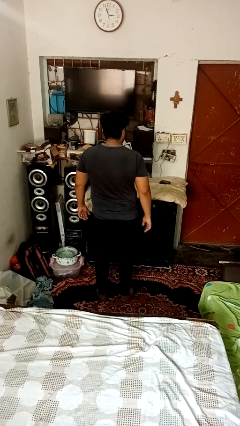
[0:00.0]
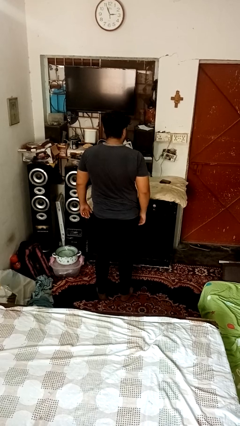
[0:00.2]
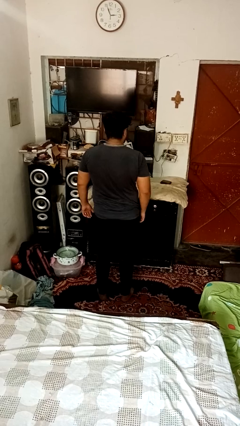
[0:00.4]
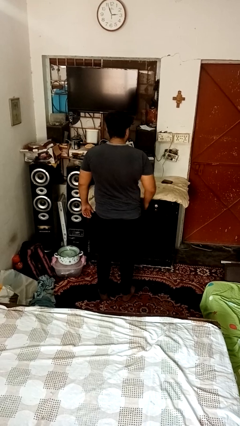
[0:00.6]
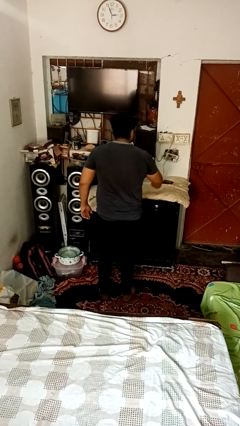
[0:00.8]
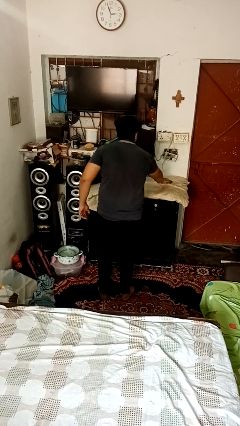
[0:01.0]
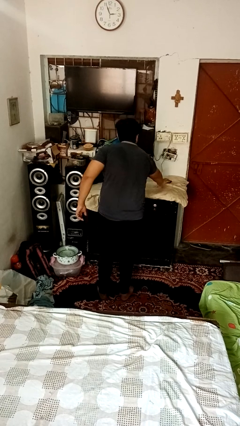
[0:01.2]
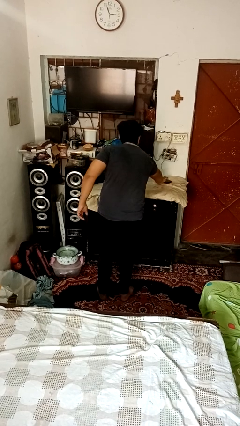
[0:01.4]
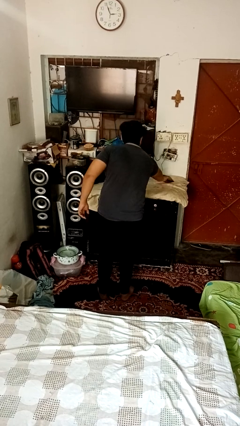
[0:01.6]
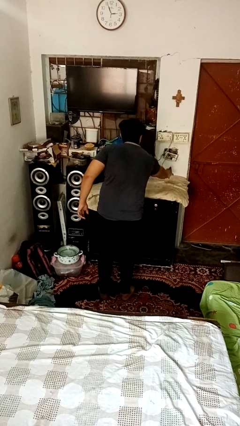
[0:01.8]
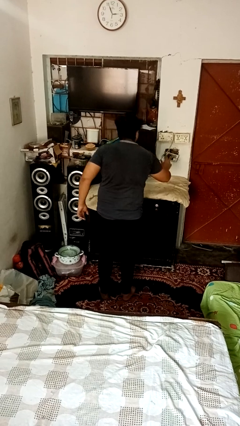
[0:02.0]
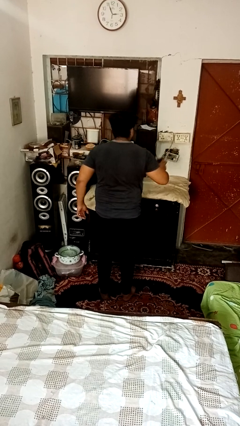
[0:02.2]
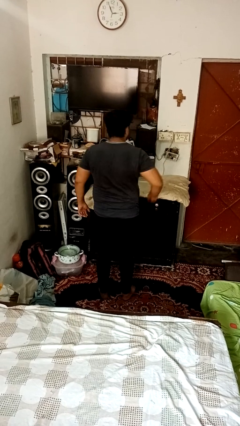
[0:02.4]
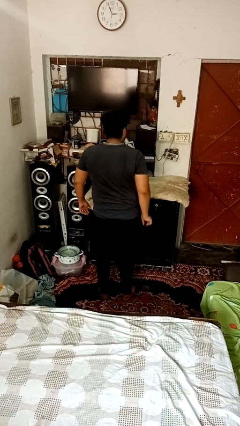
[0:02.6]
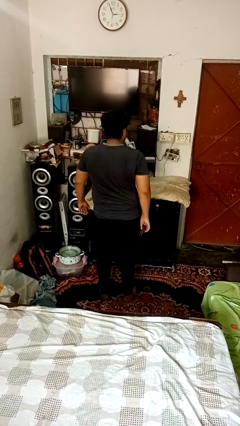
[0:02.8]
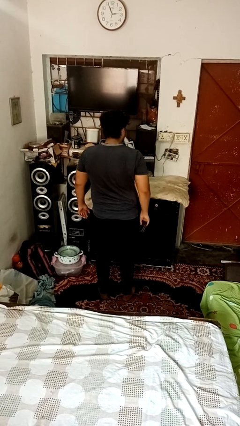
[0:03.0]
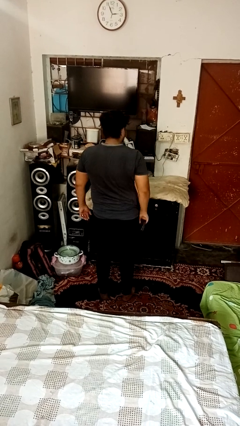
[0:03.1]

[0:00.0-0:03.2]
person picks up object from table

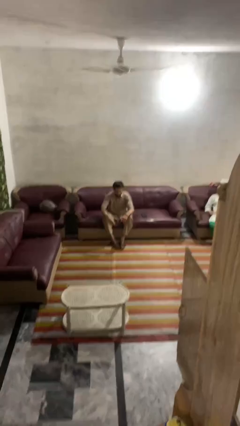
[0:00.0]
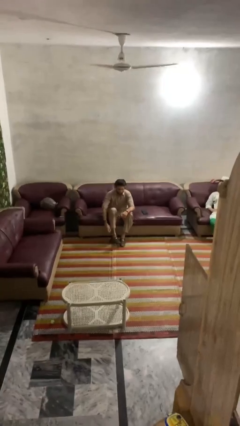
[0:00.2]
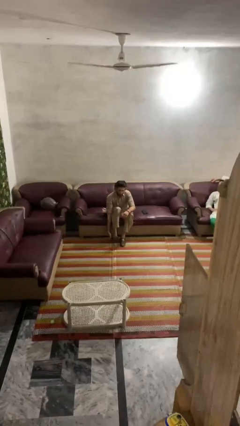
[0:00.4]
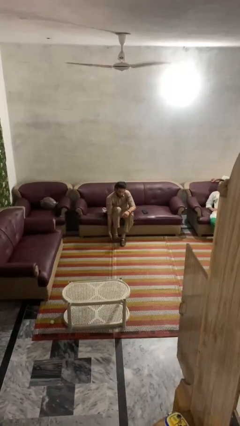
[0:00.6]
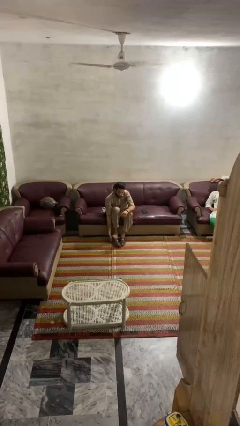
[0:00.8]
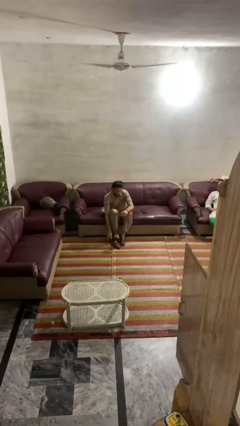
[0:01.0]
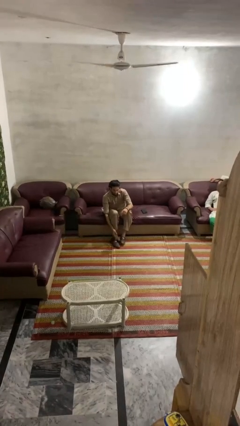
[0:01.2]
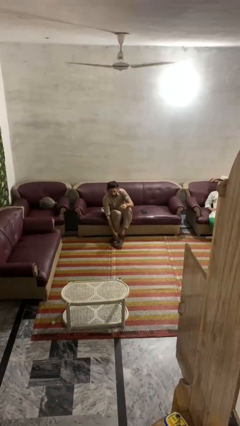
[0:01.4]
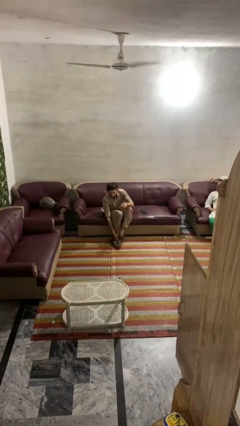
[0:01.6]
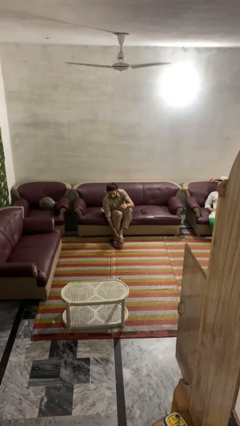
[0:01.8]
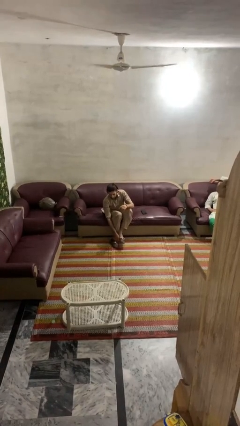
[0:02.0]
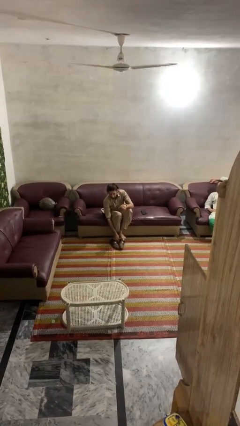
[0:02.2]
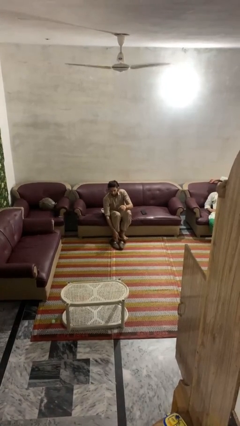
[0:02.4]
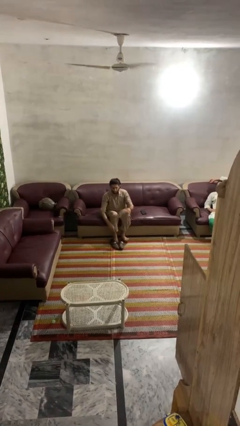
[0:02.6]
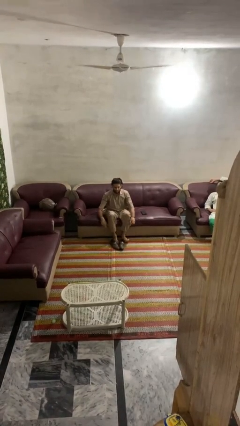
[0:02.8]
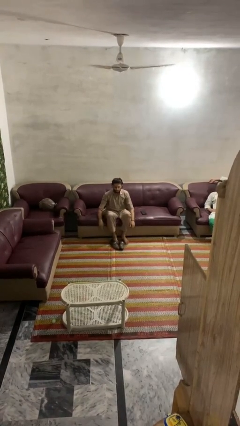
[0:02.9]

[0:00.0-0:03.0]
person takes off shoes

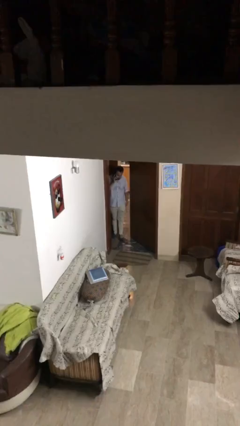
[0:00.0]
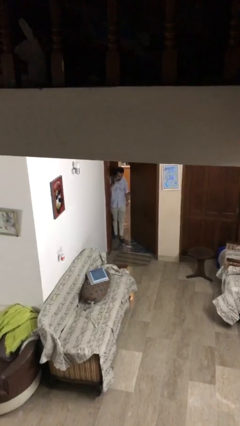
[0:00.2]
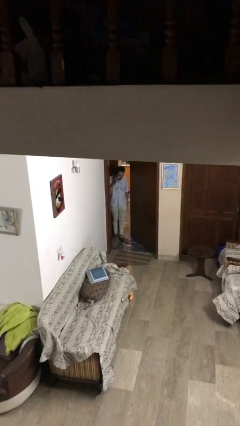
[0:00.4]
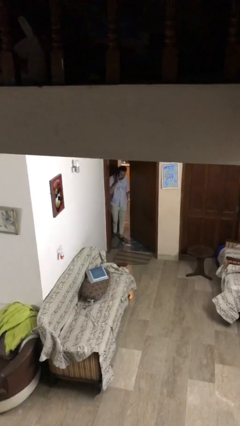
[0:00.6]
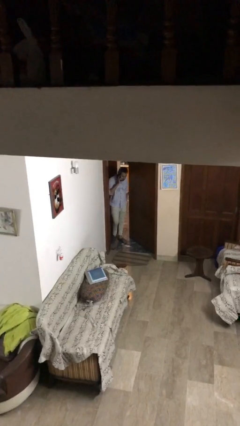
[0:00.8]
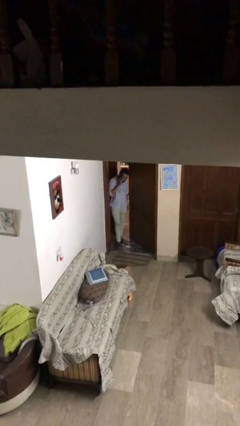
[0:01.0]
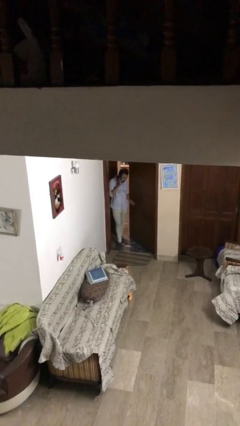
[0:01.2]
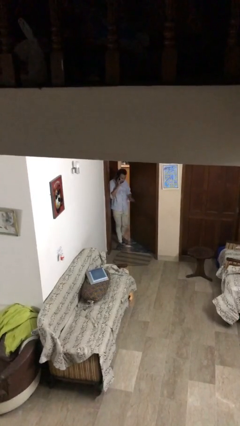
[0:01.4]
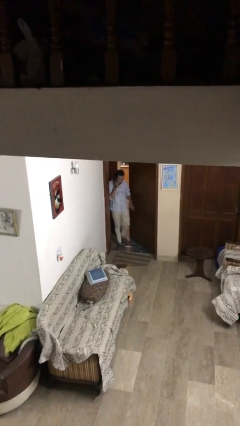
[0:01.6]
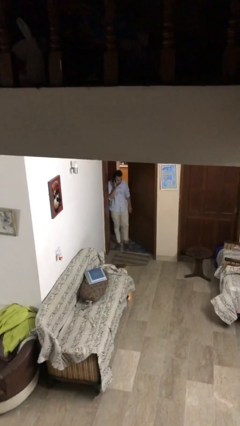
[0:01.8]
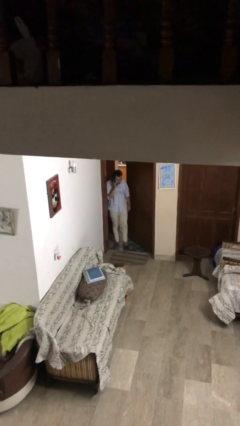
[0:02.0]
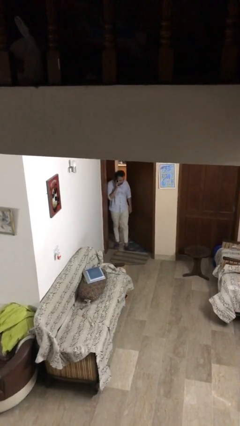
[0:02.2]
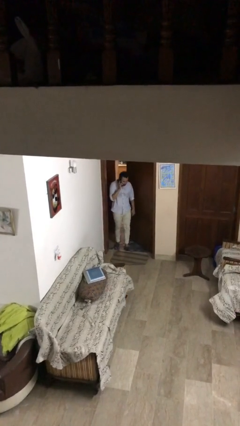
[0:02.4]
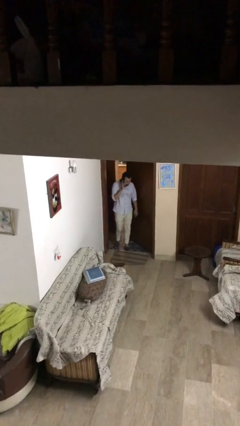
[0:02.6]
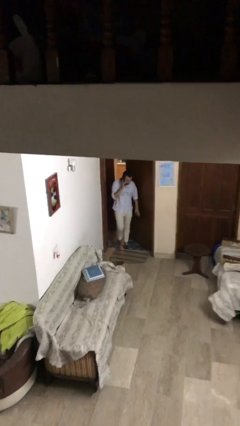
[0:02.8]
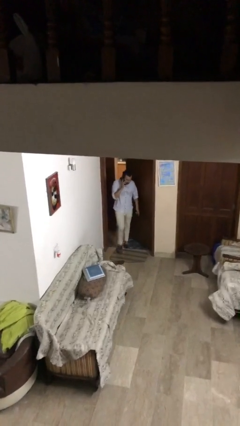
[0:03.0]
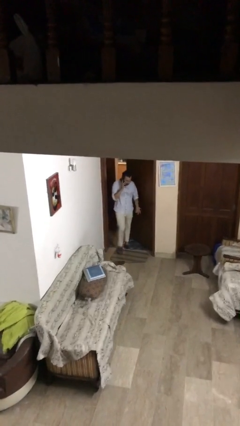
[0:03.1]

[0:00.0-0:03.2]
person enters scene through structure

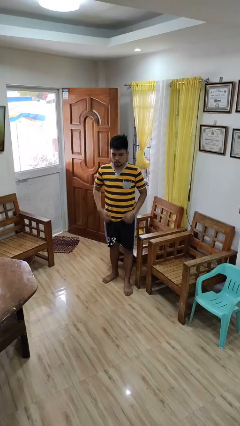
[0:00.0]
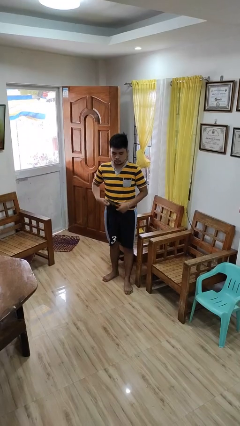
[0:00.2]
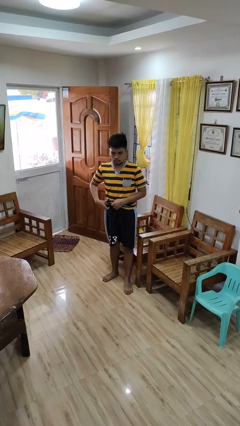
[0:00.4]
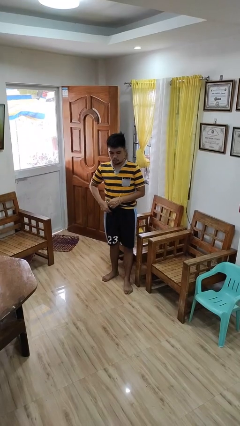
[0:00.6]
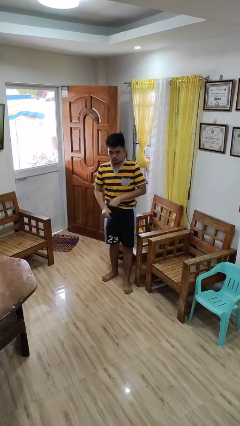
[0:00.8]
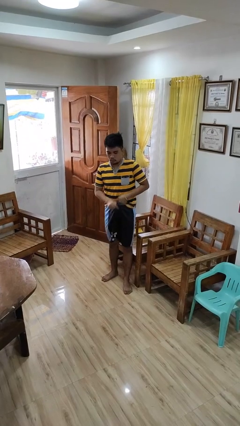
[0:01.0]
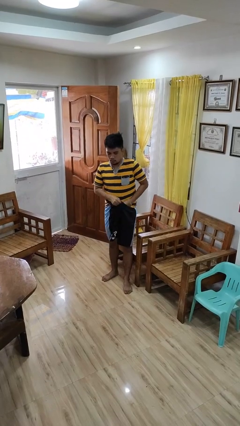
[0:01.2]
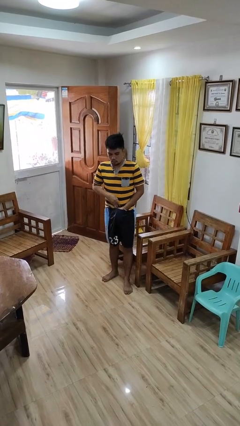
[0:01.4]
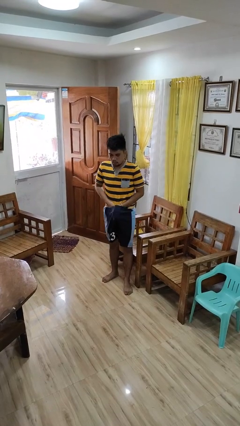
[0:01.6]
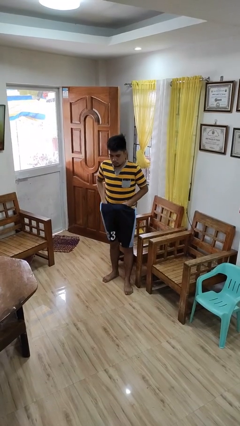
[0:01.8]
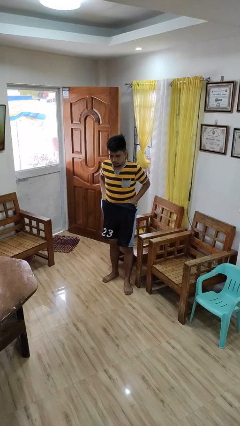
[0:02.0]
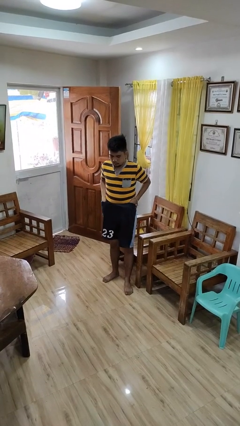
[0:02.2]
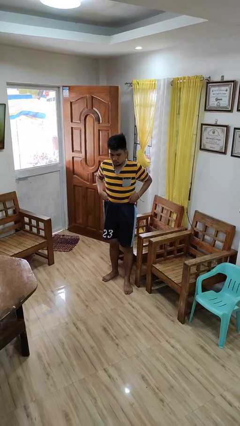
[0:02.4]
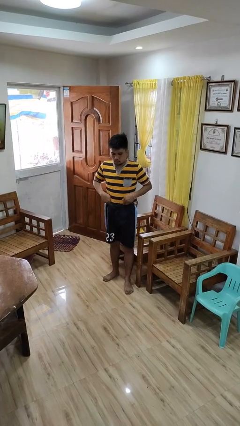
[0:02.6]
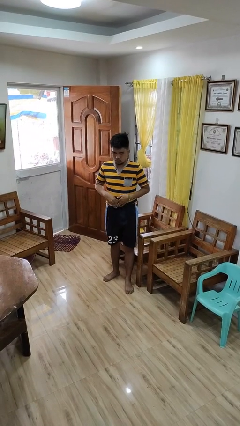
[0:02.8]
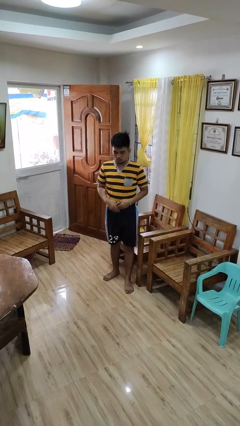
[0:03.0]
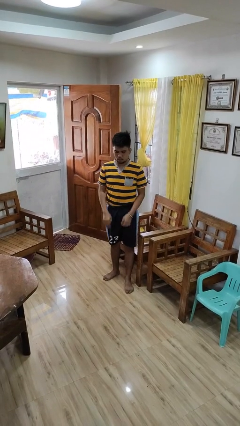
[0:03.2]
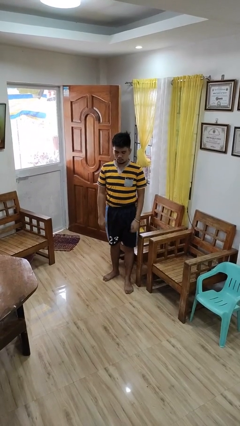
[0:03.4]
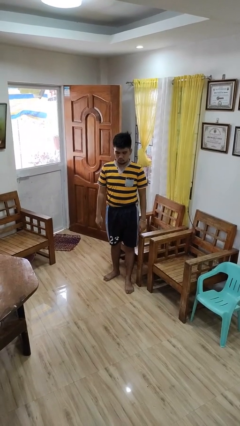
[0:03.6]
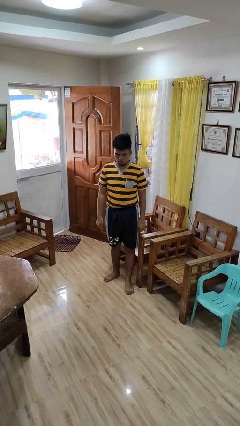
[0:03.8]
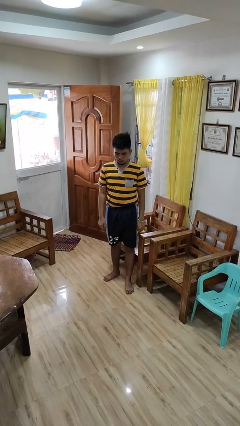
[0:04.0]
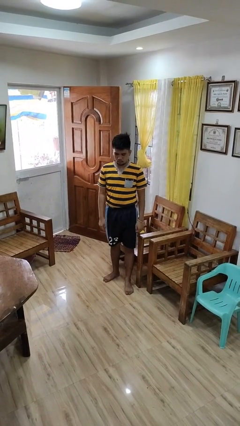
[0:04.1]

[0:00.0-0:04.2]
person tucks in shirt

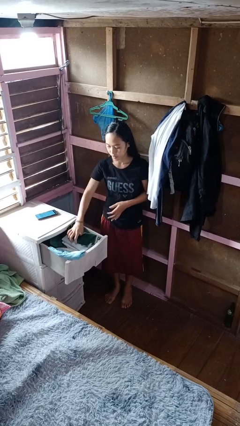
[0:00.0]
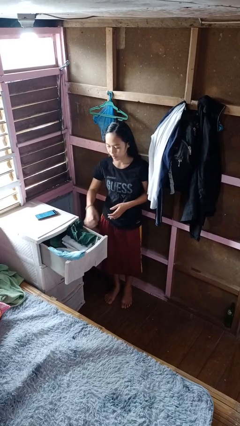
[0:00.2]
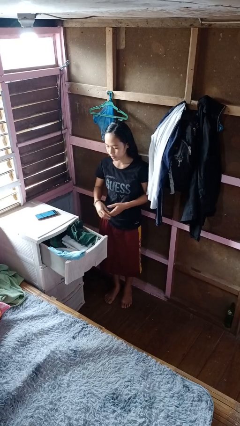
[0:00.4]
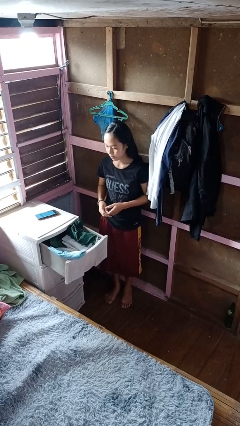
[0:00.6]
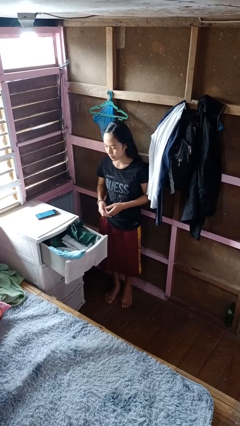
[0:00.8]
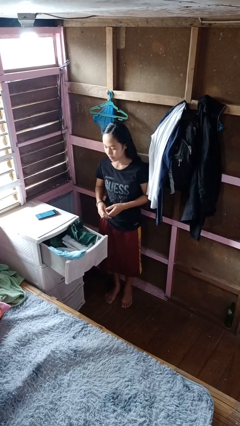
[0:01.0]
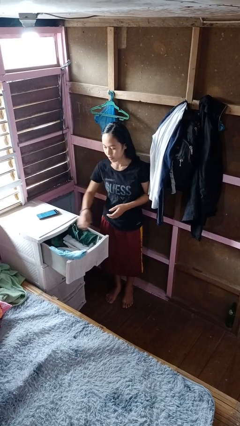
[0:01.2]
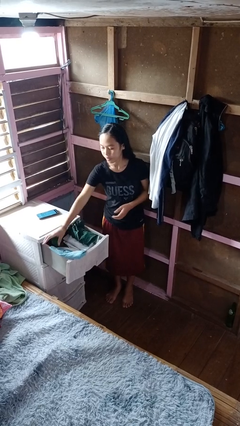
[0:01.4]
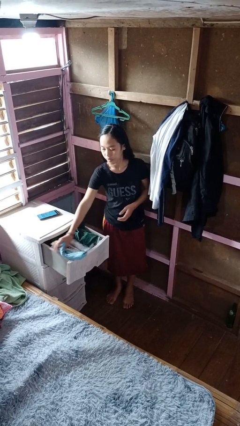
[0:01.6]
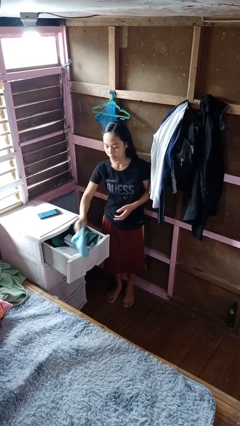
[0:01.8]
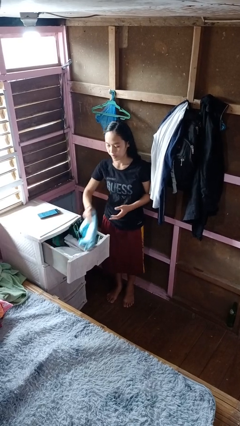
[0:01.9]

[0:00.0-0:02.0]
person puts clothes into dresser

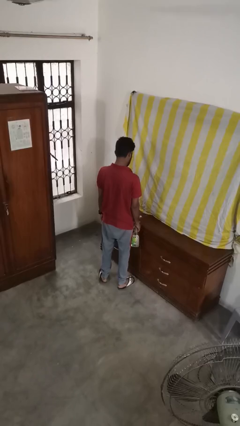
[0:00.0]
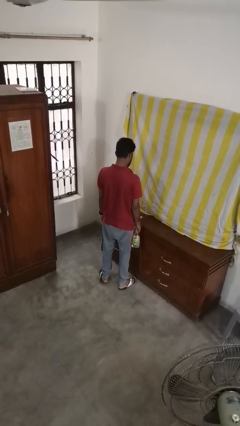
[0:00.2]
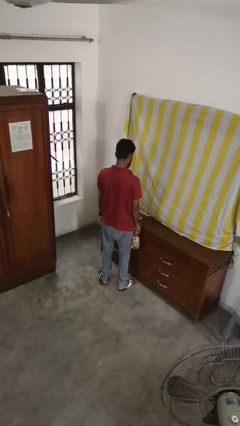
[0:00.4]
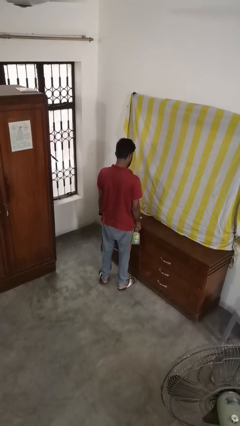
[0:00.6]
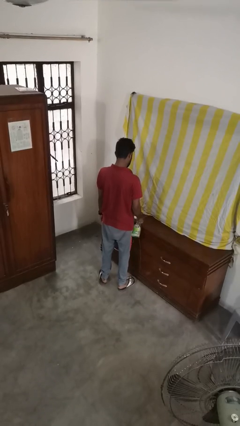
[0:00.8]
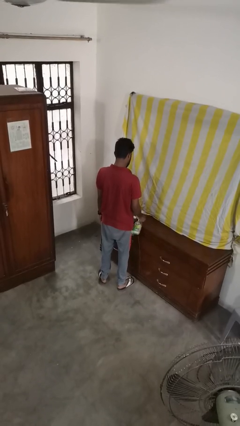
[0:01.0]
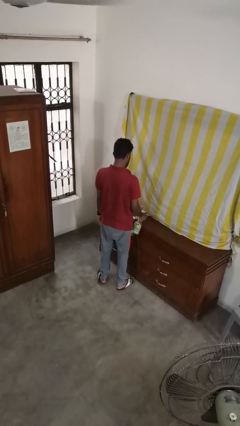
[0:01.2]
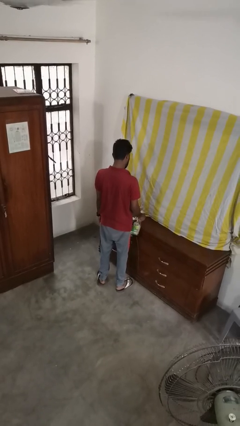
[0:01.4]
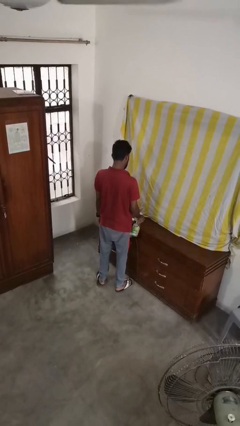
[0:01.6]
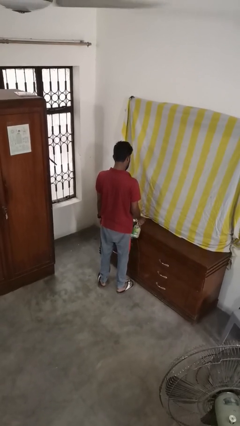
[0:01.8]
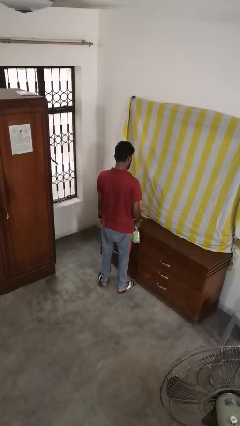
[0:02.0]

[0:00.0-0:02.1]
person sprays from bottle
